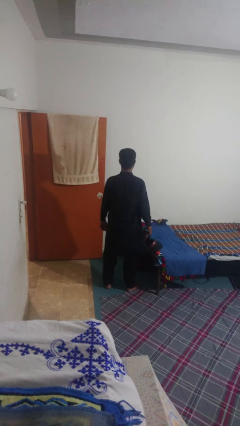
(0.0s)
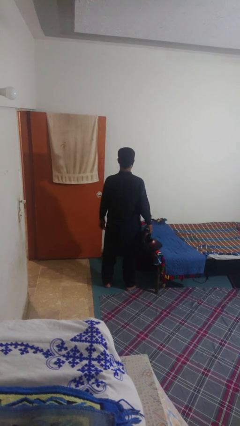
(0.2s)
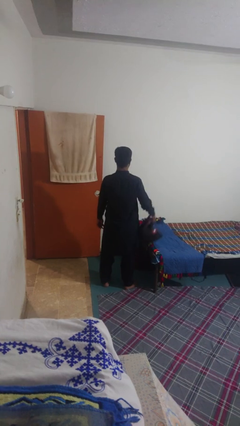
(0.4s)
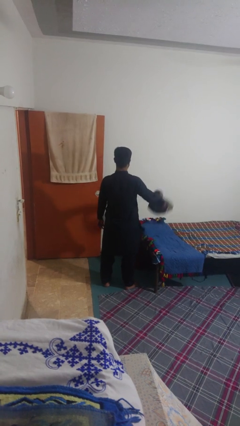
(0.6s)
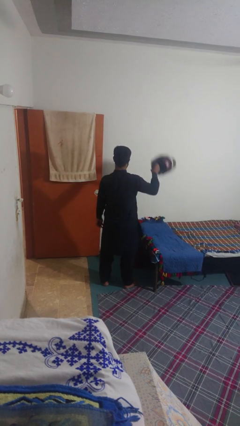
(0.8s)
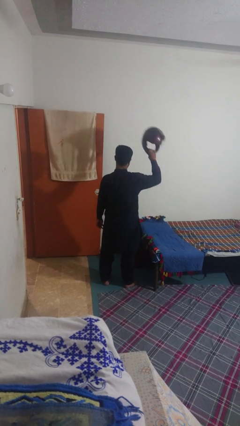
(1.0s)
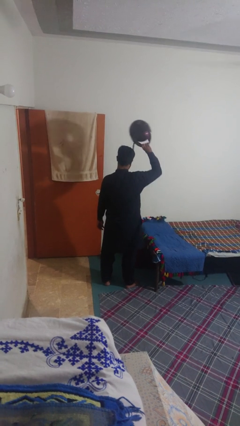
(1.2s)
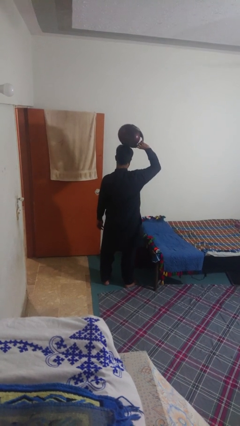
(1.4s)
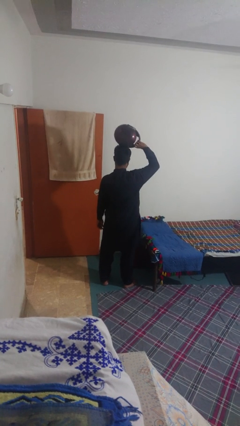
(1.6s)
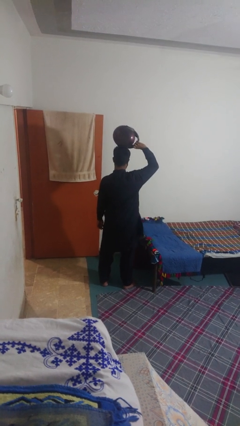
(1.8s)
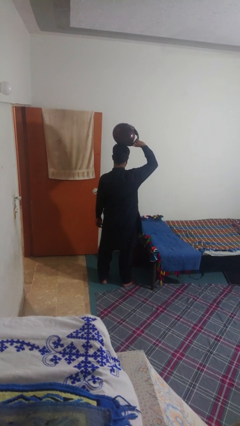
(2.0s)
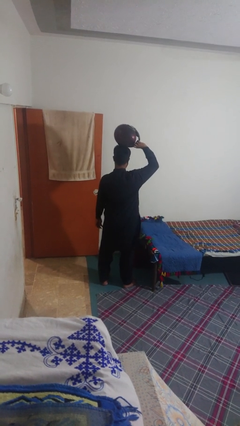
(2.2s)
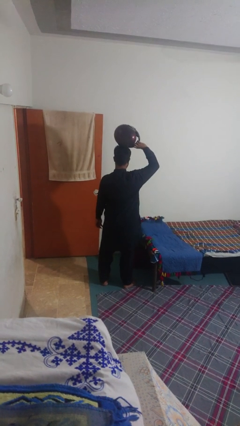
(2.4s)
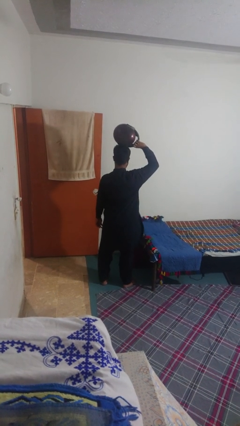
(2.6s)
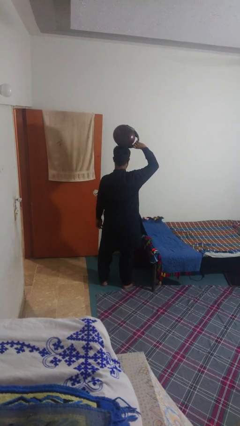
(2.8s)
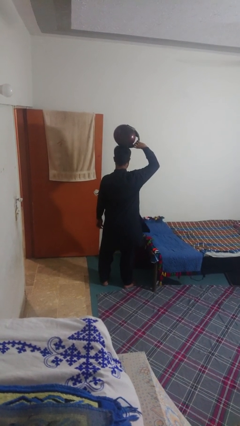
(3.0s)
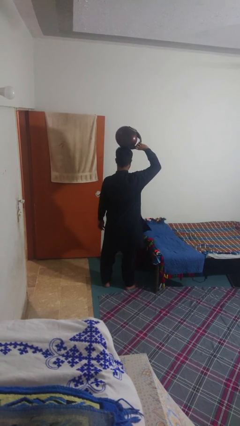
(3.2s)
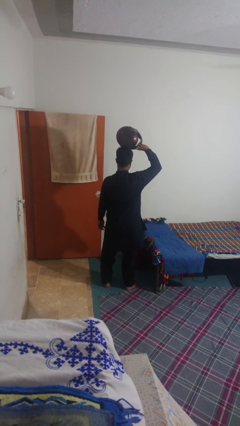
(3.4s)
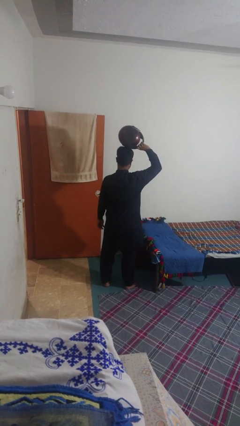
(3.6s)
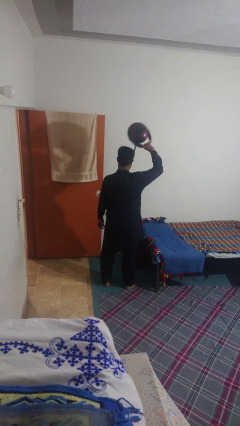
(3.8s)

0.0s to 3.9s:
person holds object above head

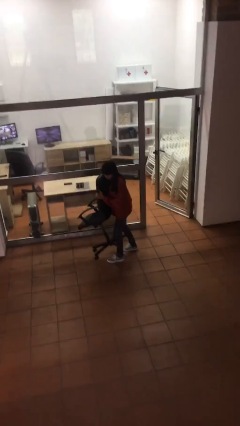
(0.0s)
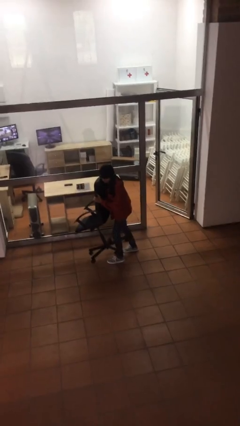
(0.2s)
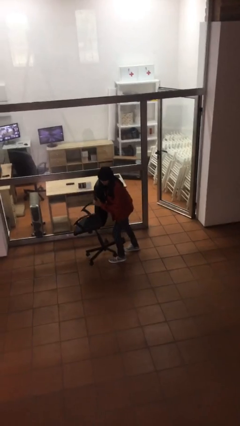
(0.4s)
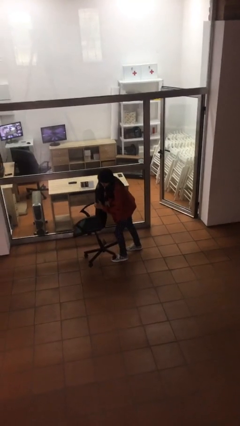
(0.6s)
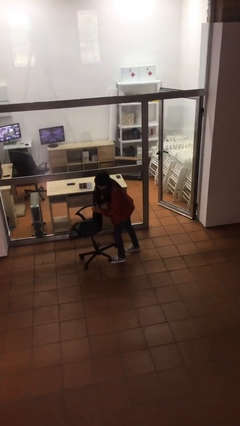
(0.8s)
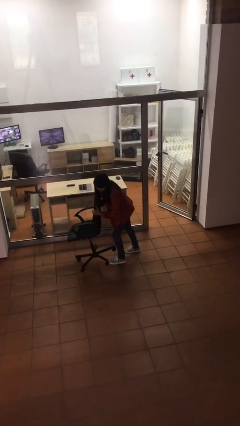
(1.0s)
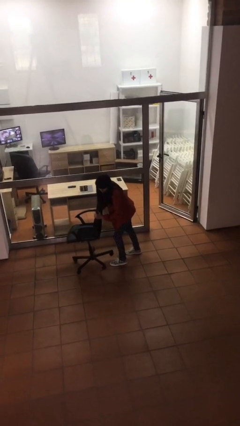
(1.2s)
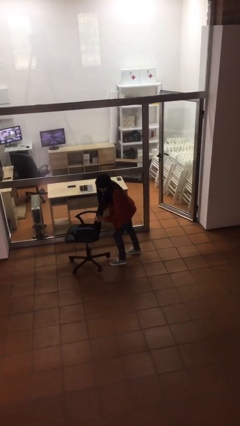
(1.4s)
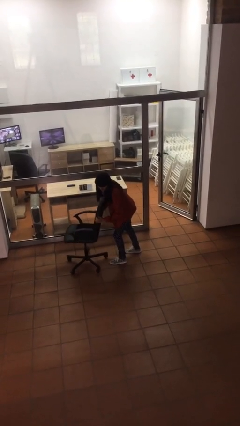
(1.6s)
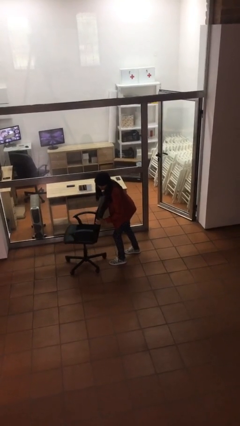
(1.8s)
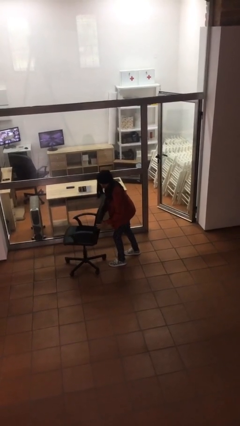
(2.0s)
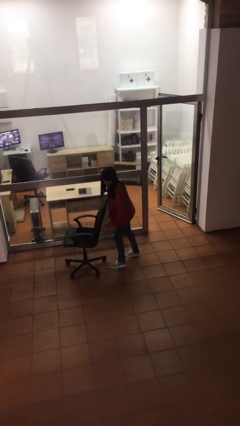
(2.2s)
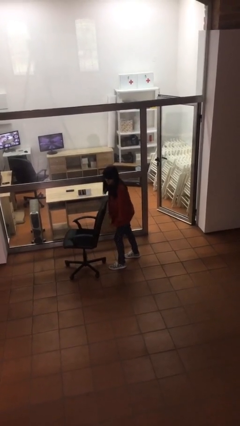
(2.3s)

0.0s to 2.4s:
person puts down object on floor

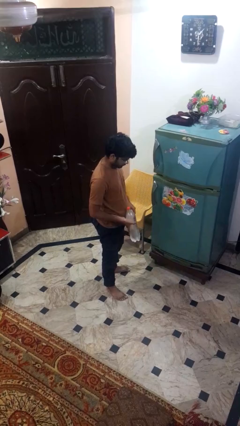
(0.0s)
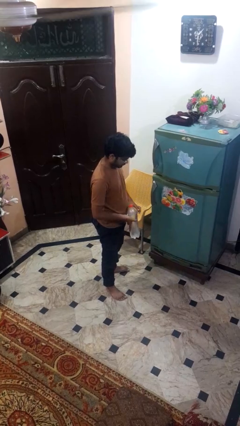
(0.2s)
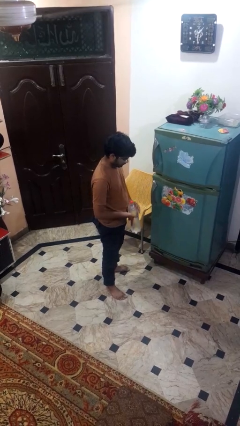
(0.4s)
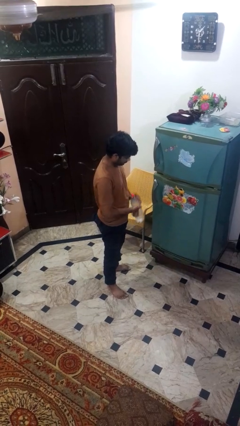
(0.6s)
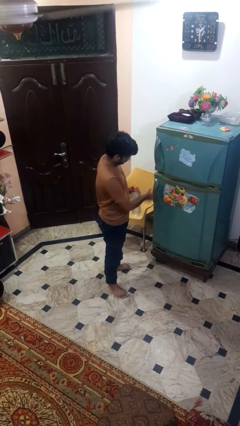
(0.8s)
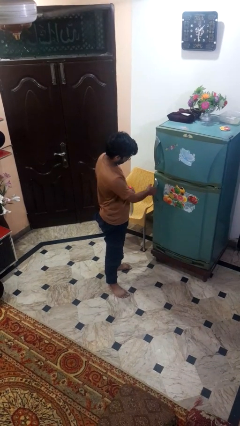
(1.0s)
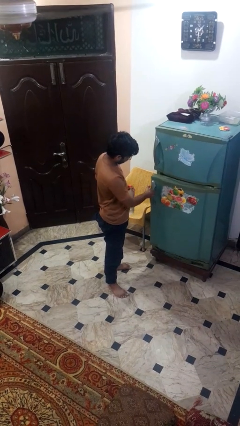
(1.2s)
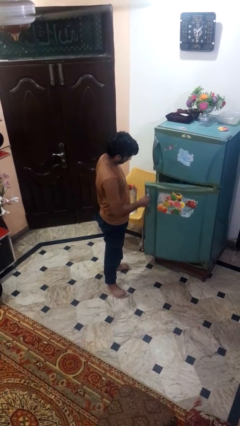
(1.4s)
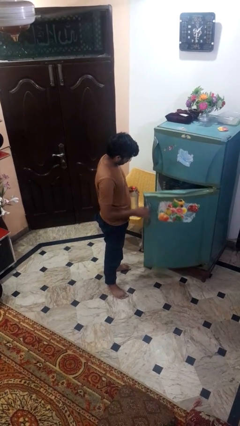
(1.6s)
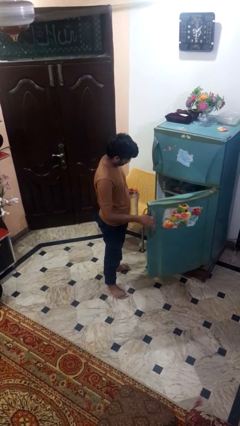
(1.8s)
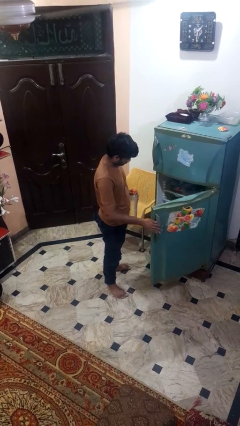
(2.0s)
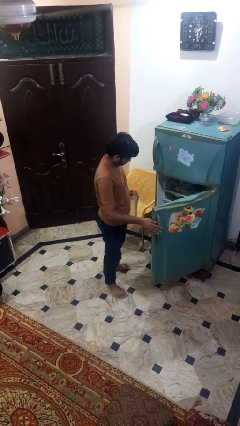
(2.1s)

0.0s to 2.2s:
person opens refrigerator

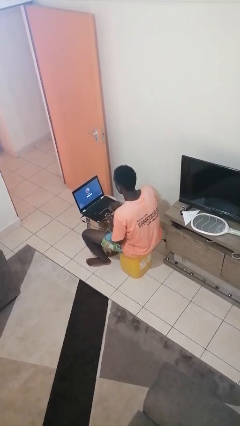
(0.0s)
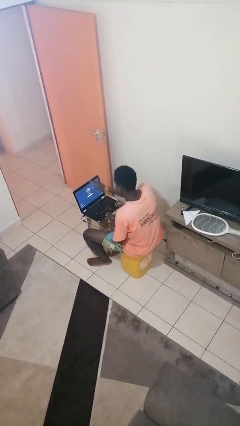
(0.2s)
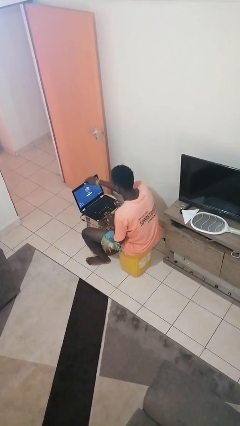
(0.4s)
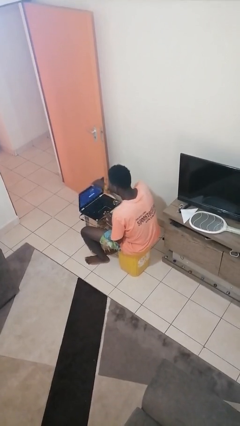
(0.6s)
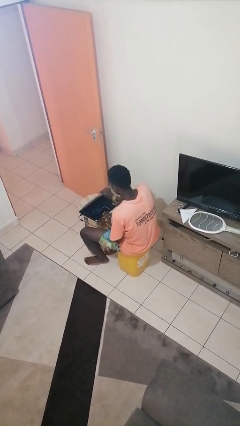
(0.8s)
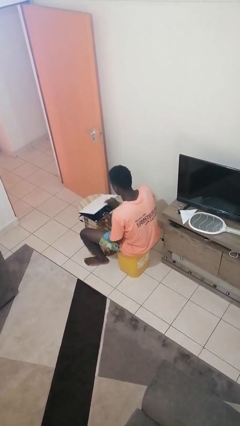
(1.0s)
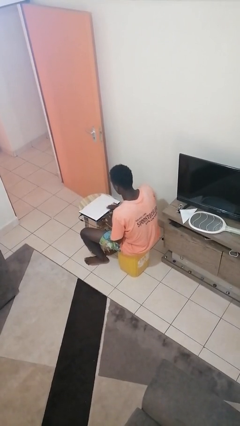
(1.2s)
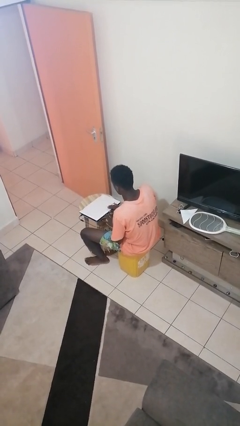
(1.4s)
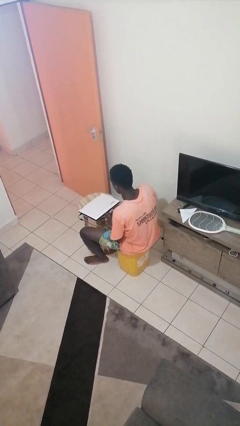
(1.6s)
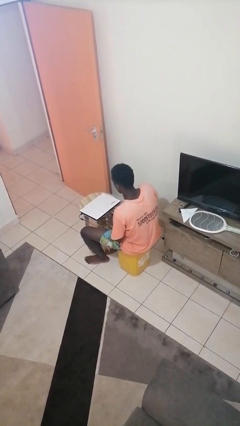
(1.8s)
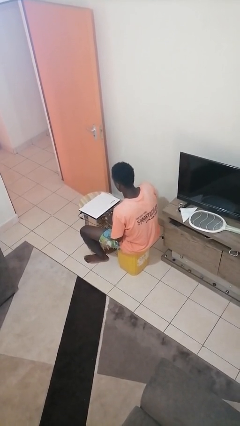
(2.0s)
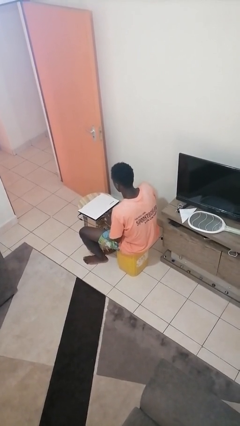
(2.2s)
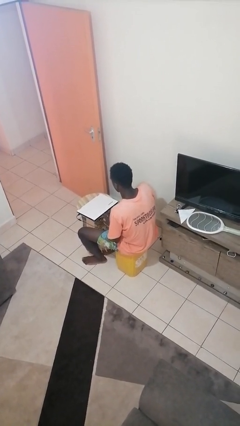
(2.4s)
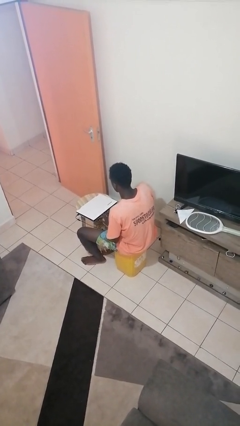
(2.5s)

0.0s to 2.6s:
person closes laptop

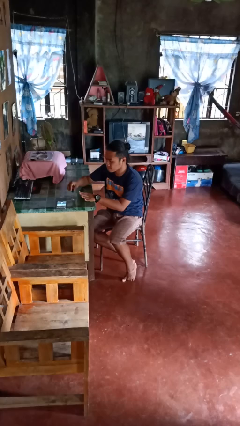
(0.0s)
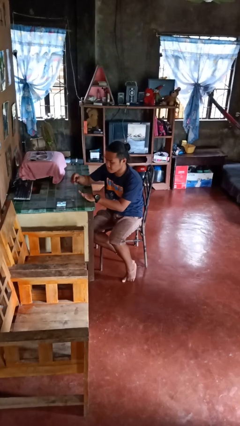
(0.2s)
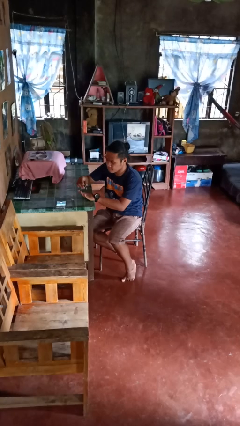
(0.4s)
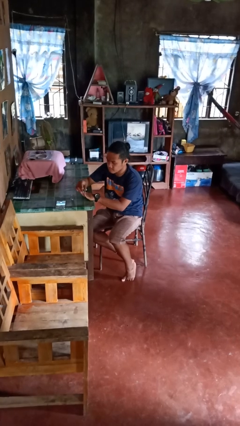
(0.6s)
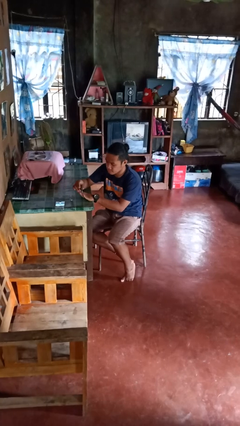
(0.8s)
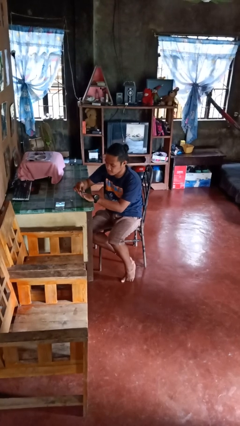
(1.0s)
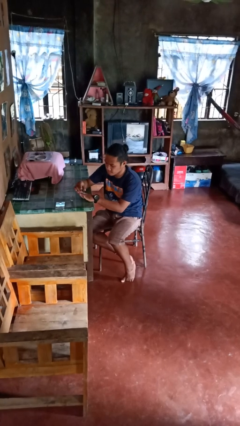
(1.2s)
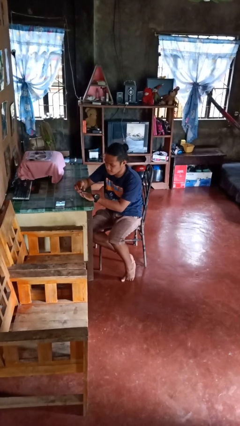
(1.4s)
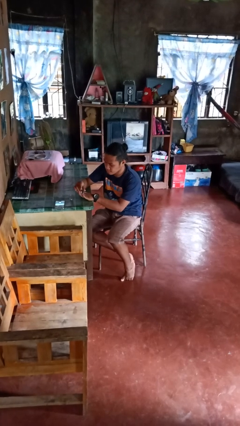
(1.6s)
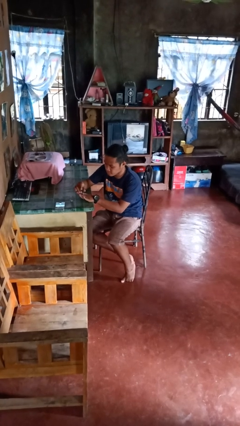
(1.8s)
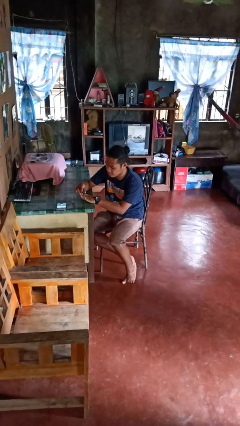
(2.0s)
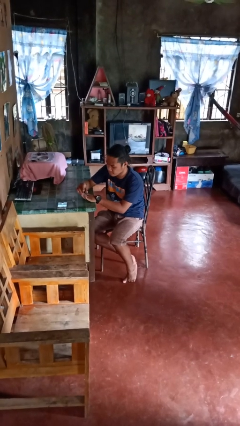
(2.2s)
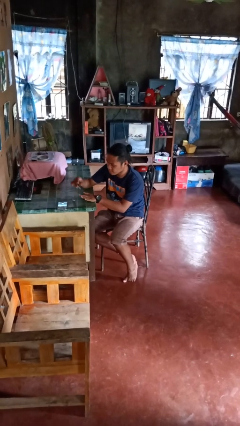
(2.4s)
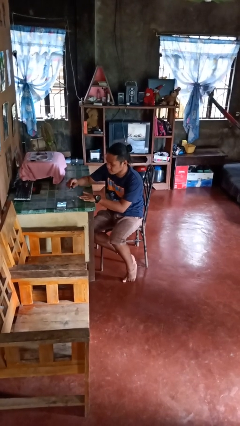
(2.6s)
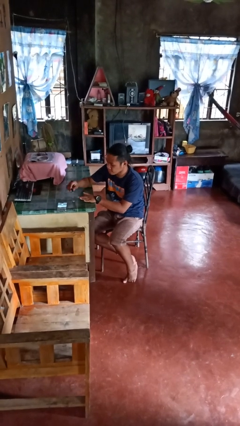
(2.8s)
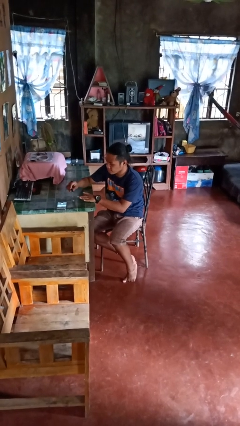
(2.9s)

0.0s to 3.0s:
person paints fingernails

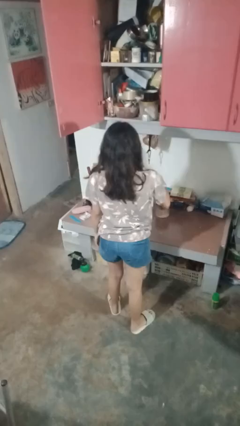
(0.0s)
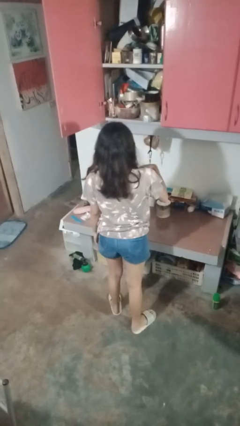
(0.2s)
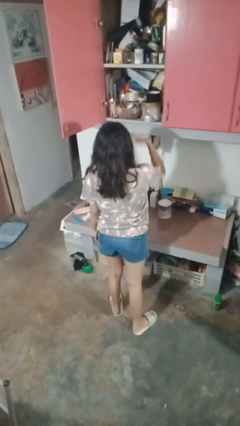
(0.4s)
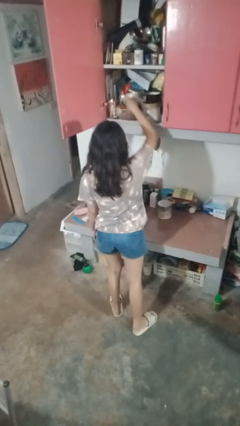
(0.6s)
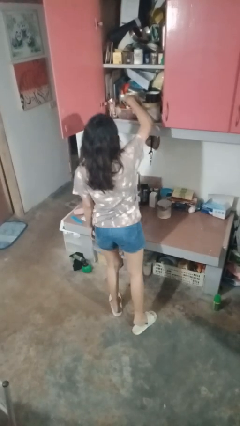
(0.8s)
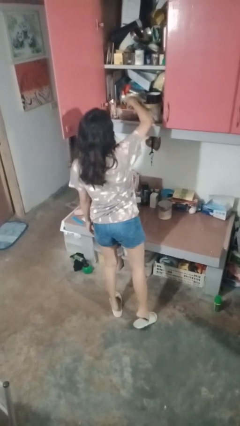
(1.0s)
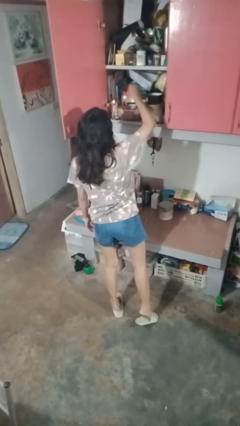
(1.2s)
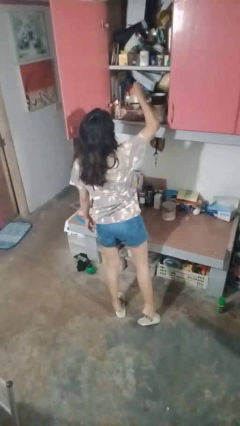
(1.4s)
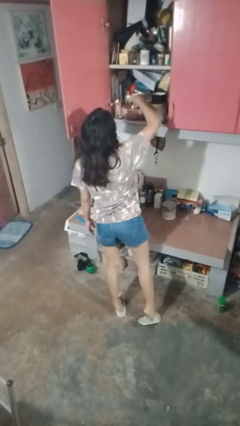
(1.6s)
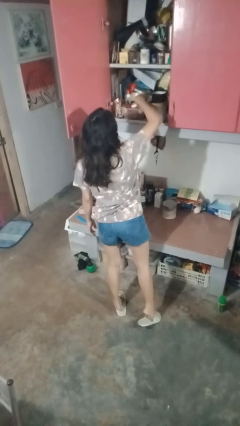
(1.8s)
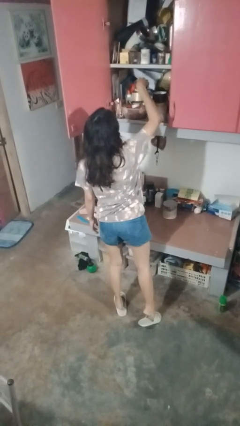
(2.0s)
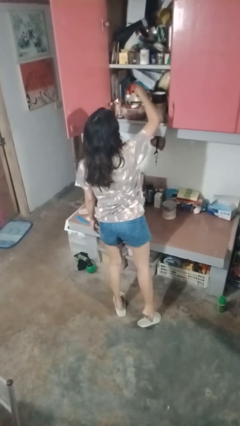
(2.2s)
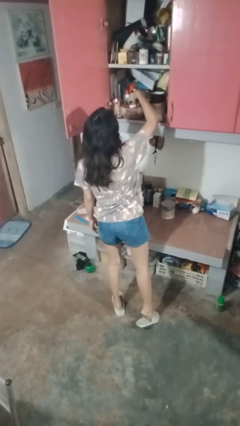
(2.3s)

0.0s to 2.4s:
person searches in cabinet

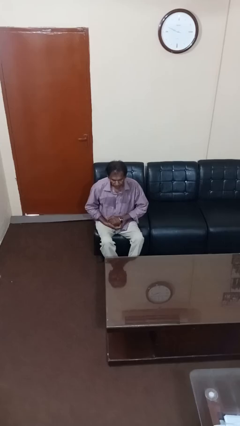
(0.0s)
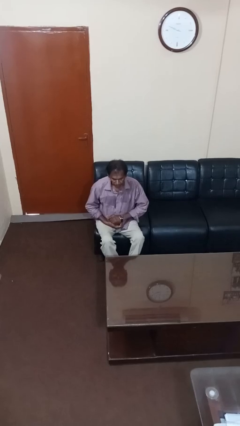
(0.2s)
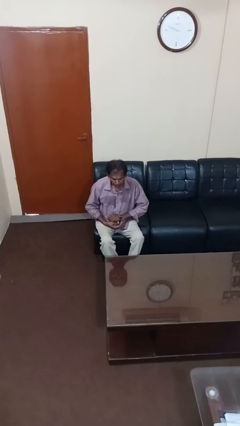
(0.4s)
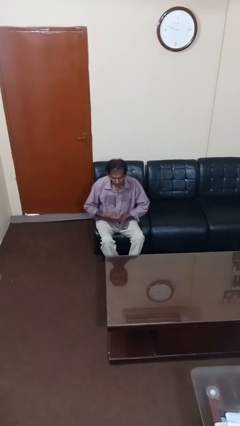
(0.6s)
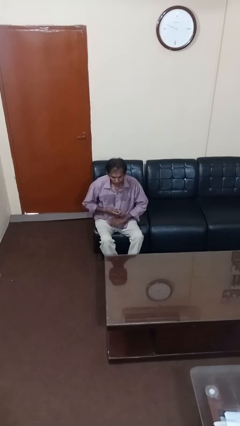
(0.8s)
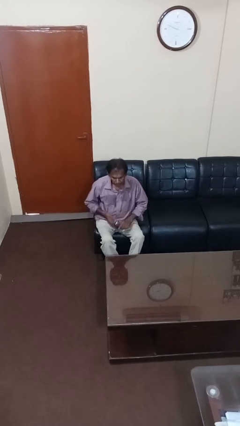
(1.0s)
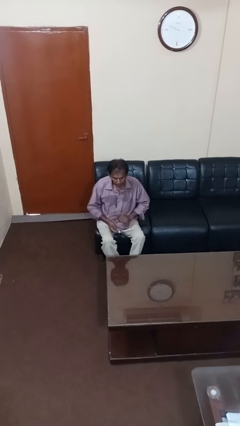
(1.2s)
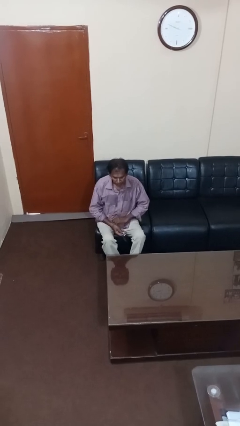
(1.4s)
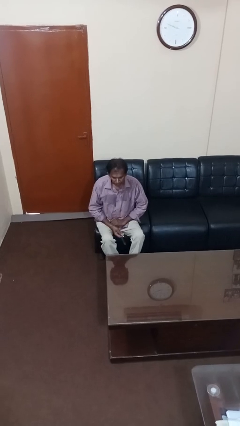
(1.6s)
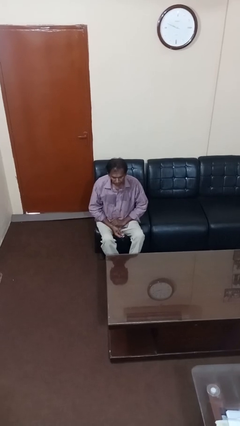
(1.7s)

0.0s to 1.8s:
person takes off wristwatch
